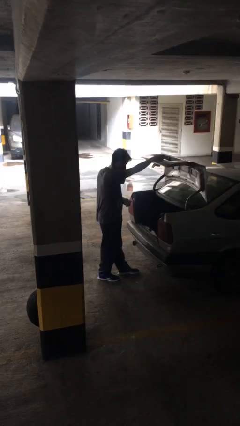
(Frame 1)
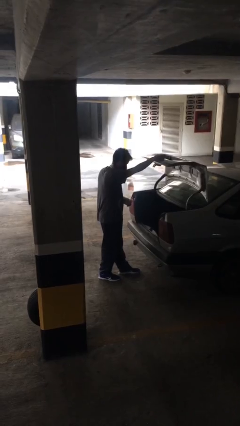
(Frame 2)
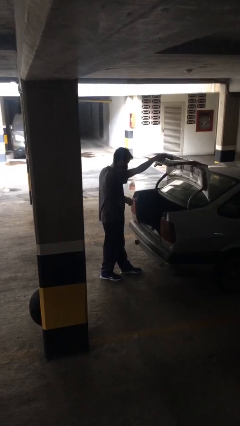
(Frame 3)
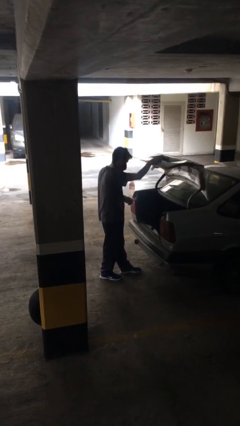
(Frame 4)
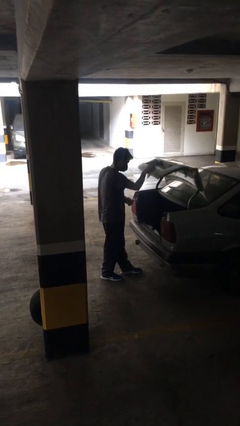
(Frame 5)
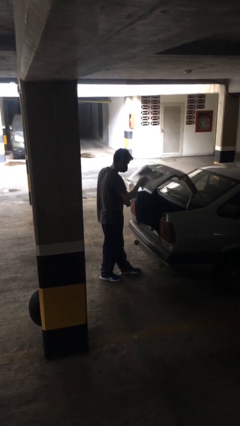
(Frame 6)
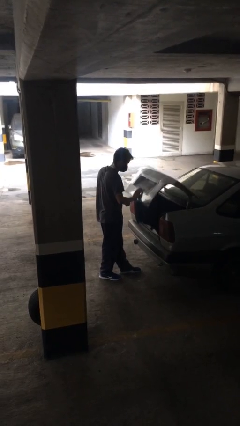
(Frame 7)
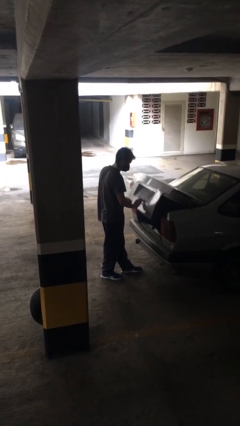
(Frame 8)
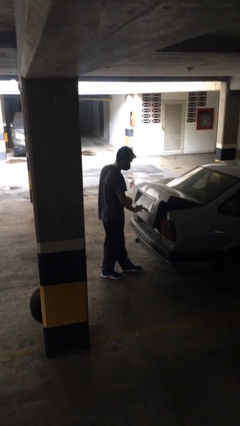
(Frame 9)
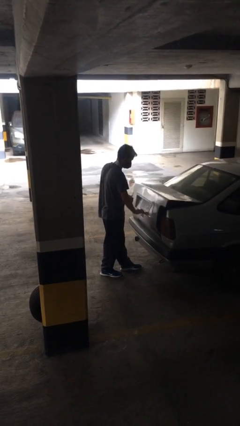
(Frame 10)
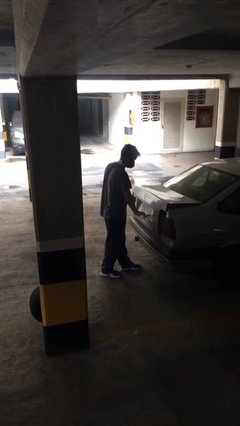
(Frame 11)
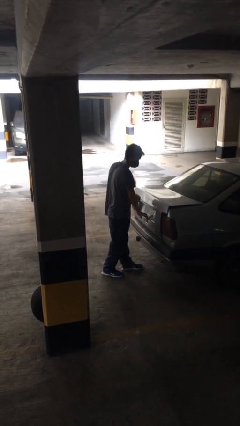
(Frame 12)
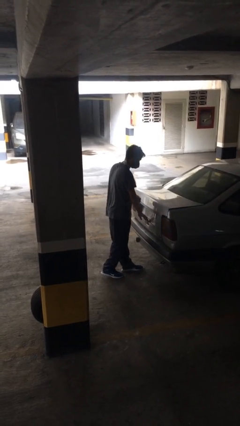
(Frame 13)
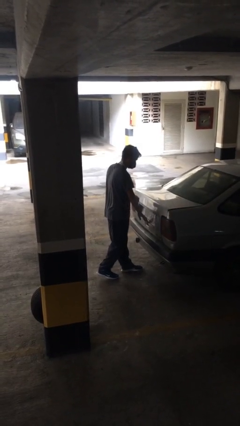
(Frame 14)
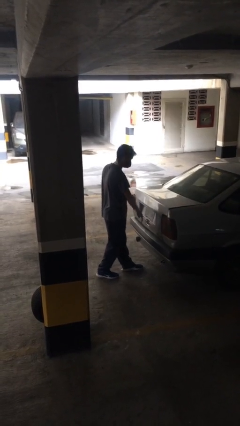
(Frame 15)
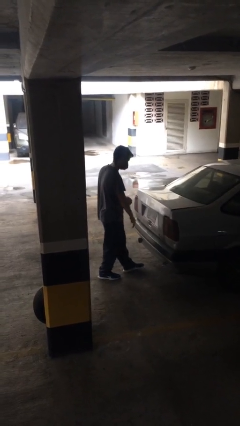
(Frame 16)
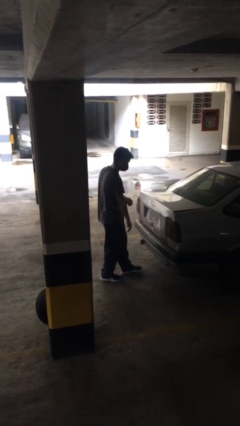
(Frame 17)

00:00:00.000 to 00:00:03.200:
person closes car trunk

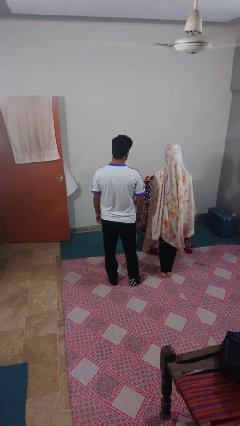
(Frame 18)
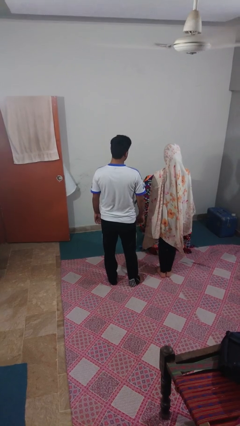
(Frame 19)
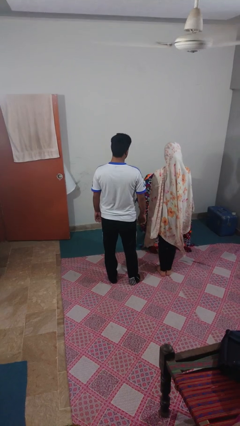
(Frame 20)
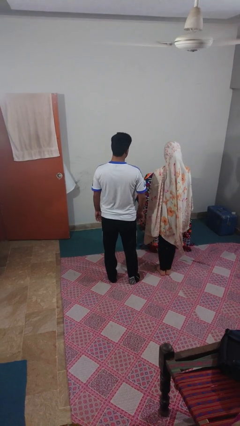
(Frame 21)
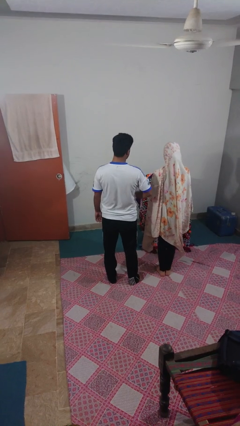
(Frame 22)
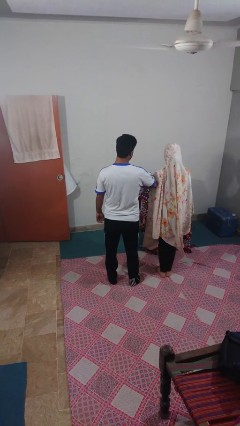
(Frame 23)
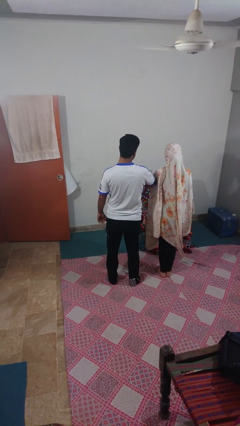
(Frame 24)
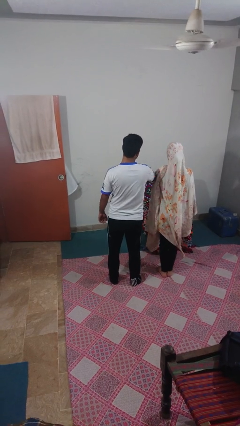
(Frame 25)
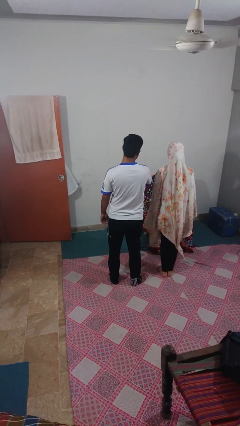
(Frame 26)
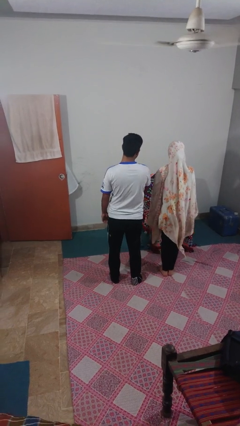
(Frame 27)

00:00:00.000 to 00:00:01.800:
person nudges person with elbow

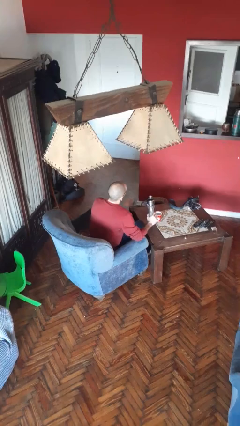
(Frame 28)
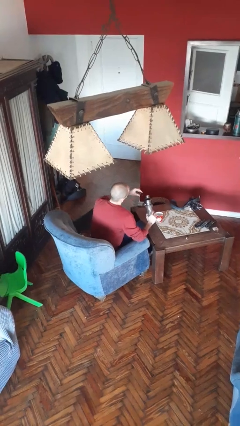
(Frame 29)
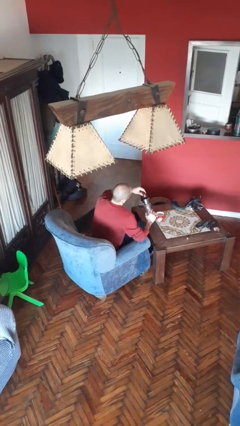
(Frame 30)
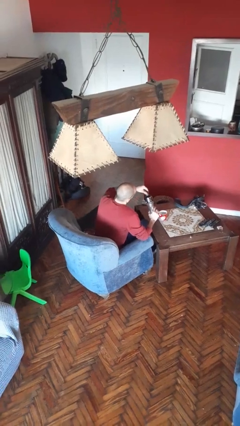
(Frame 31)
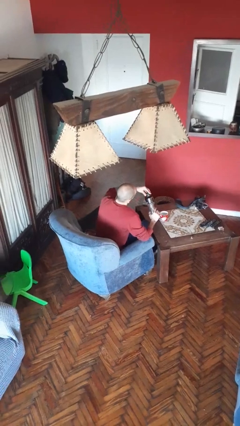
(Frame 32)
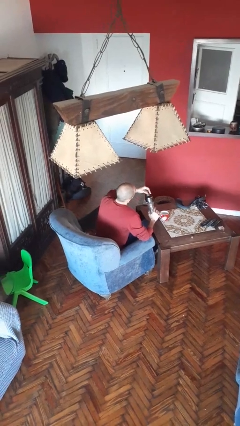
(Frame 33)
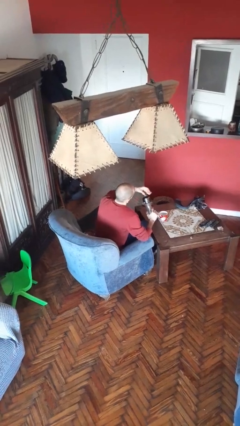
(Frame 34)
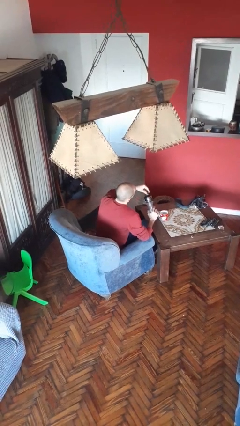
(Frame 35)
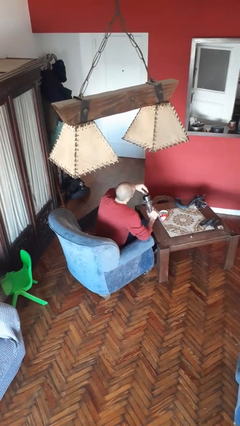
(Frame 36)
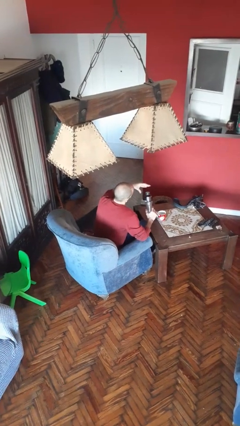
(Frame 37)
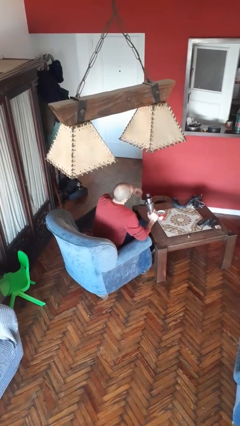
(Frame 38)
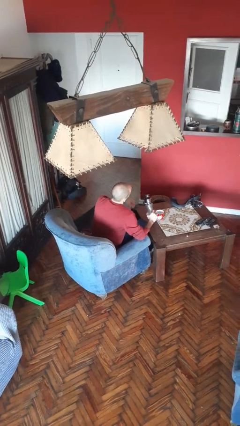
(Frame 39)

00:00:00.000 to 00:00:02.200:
person screws lid to bottle

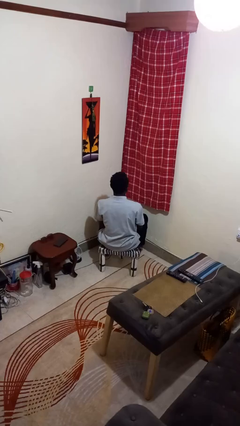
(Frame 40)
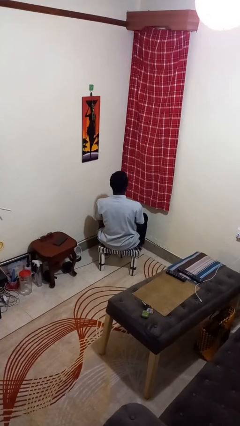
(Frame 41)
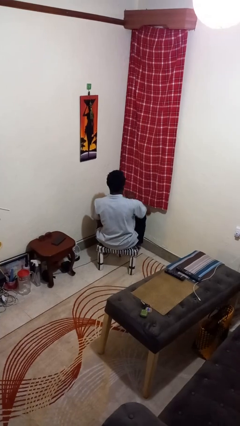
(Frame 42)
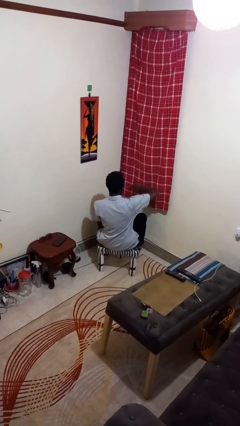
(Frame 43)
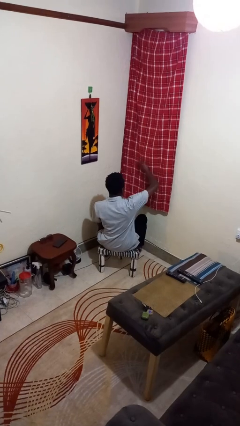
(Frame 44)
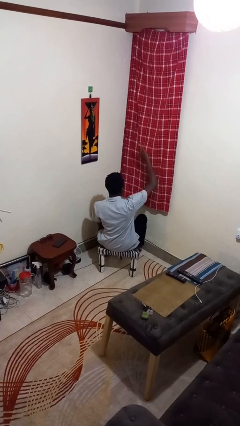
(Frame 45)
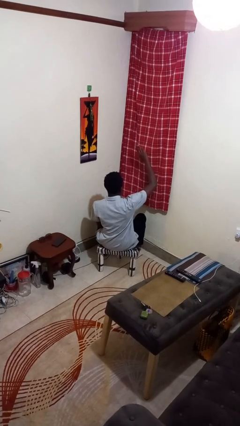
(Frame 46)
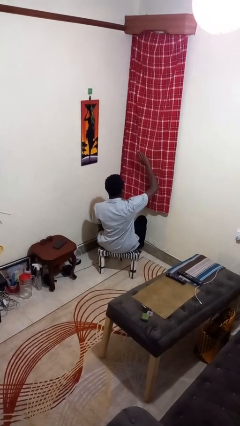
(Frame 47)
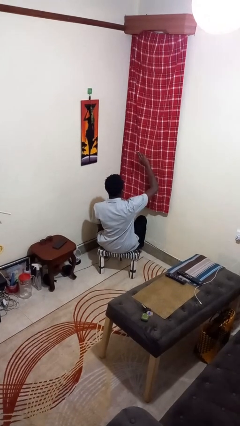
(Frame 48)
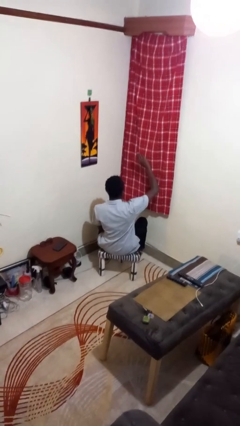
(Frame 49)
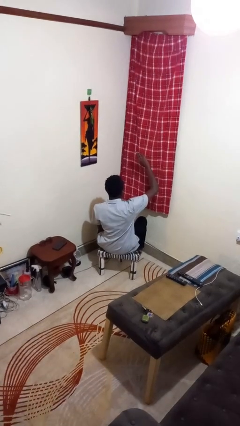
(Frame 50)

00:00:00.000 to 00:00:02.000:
person gestures swipe up

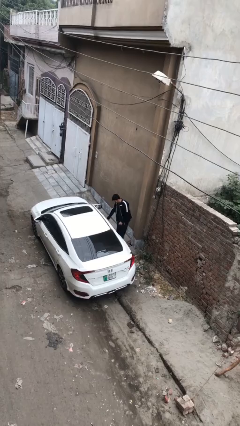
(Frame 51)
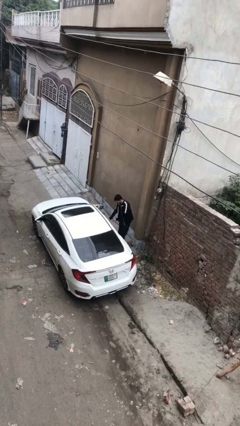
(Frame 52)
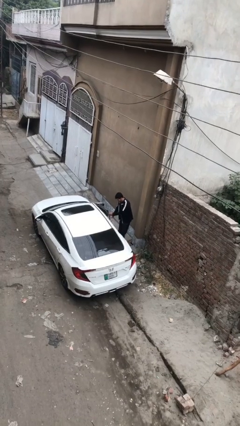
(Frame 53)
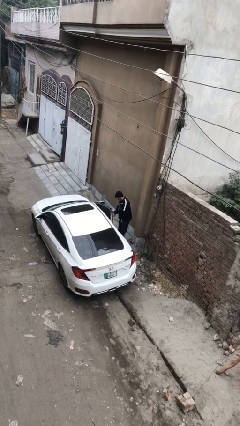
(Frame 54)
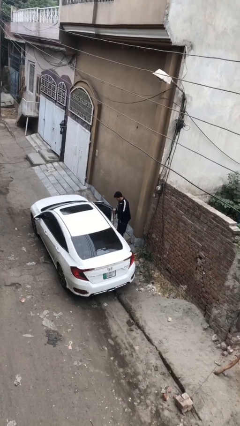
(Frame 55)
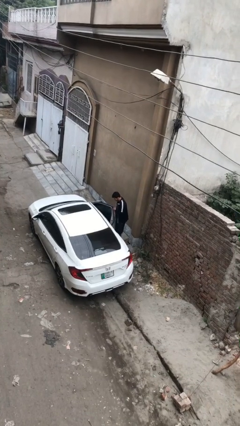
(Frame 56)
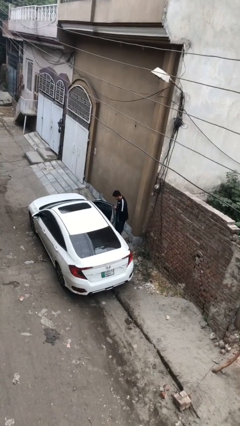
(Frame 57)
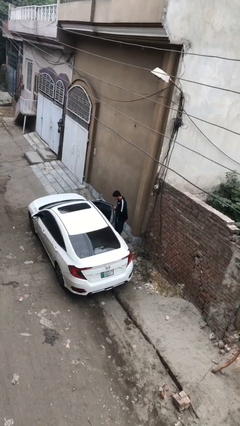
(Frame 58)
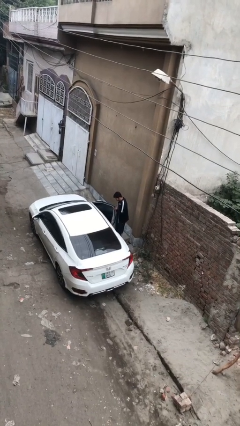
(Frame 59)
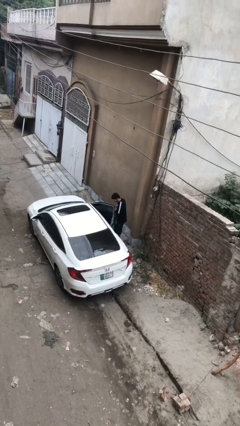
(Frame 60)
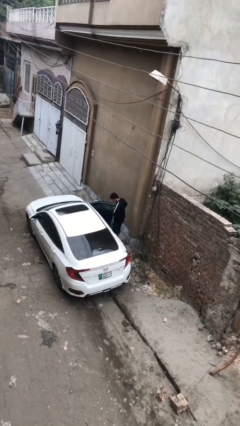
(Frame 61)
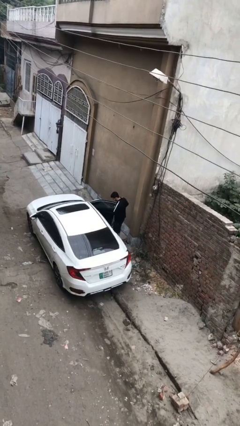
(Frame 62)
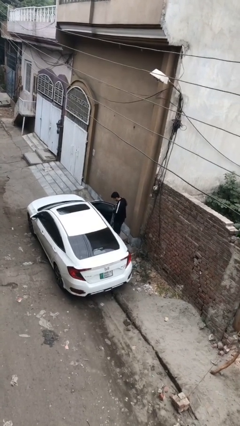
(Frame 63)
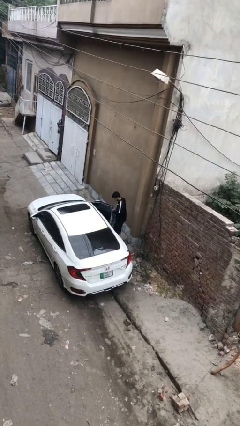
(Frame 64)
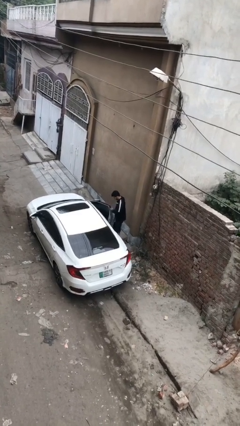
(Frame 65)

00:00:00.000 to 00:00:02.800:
person opens car door

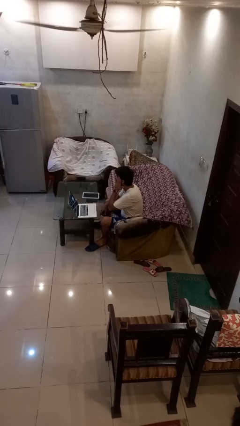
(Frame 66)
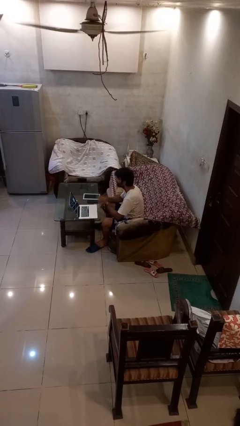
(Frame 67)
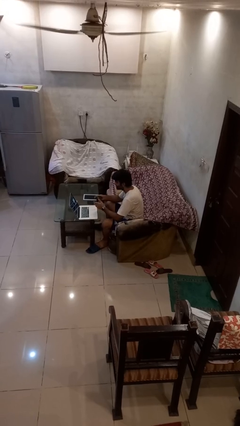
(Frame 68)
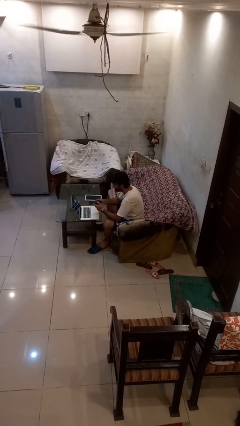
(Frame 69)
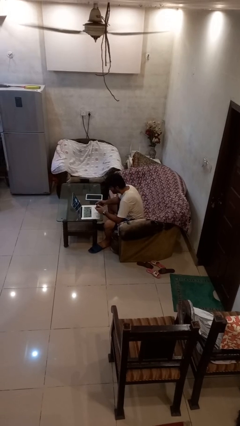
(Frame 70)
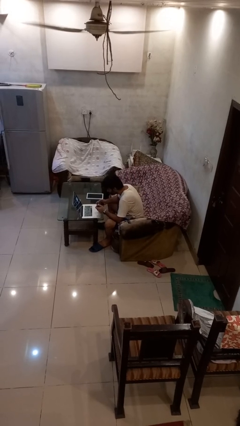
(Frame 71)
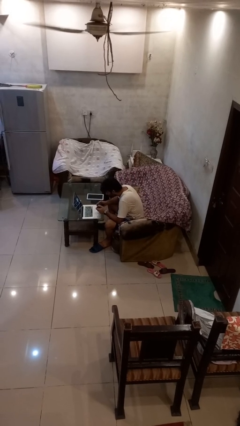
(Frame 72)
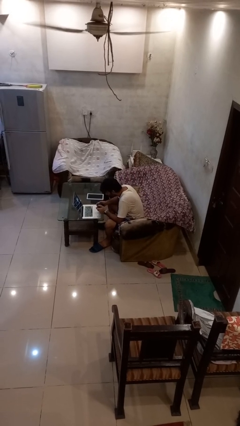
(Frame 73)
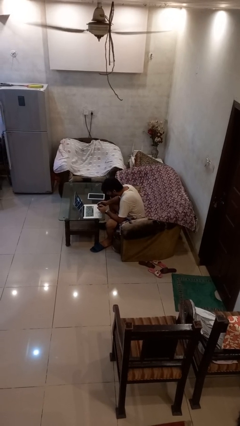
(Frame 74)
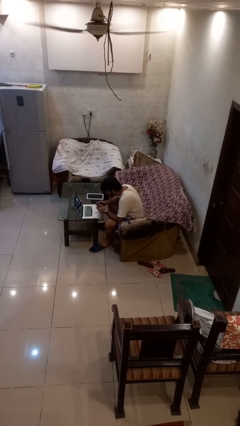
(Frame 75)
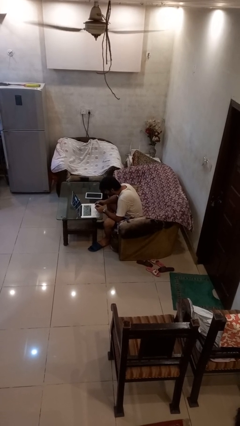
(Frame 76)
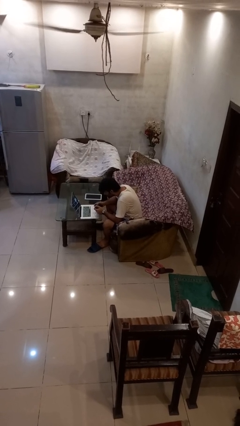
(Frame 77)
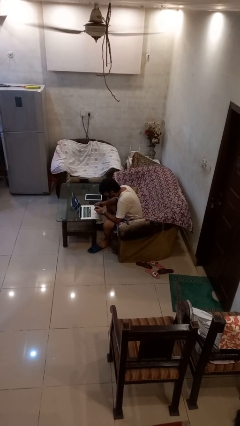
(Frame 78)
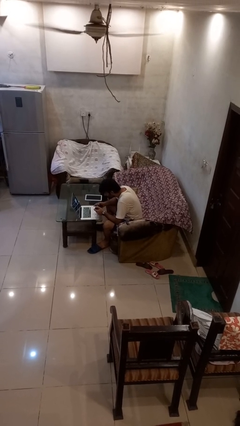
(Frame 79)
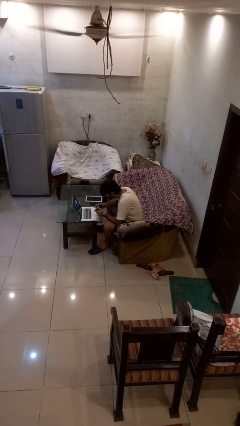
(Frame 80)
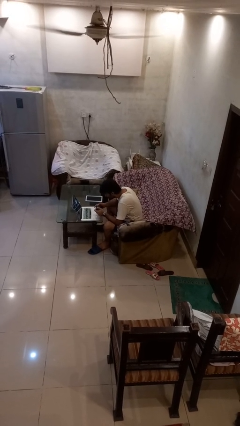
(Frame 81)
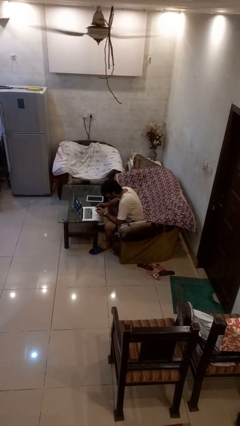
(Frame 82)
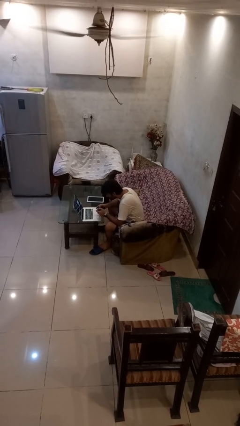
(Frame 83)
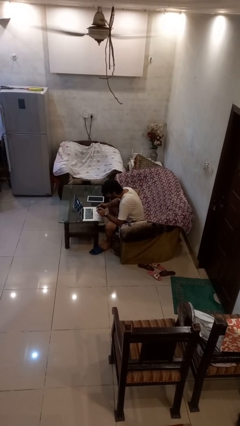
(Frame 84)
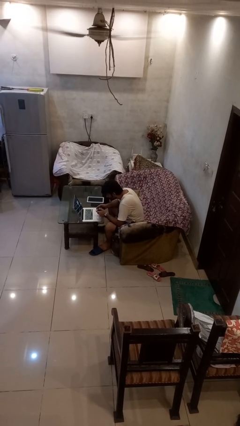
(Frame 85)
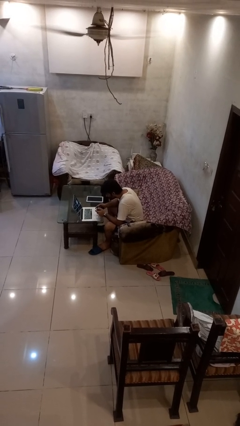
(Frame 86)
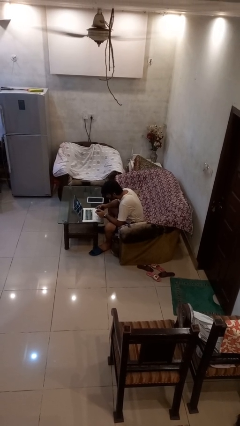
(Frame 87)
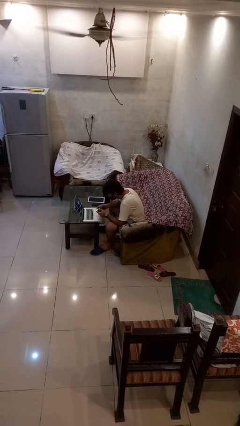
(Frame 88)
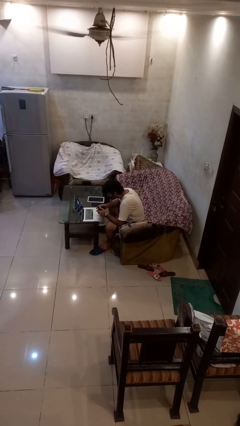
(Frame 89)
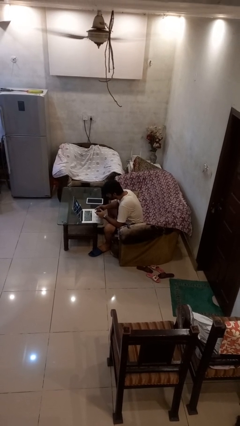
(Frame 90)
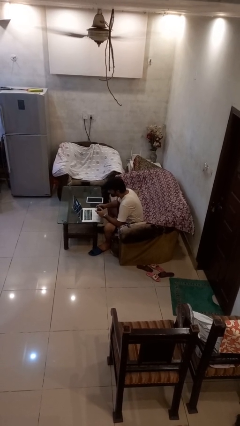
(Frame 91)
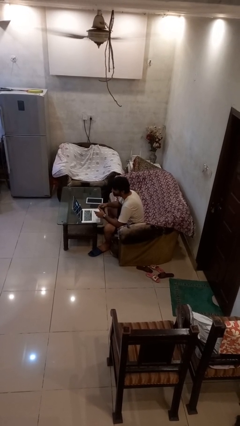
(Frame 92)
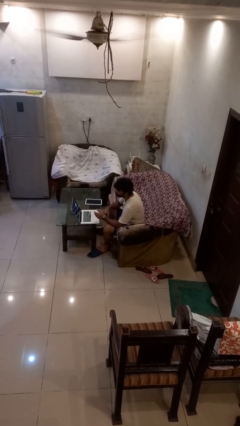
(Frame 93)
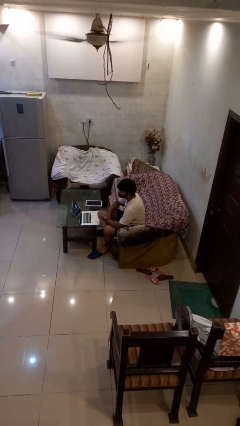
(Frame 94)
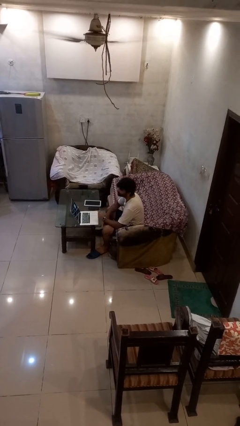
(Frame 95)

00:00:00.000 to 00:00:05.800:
person interacts with handheld game
